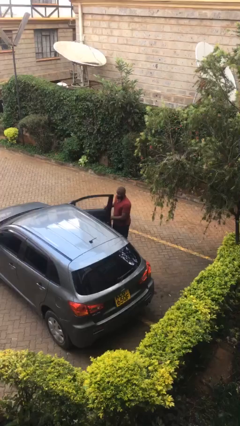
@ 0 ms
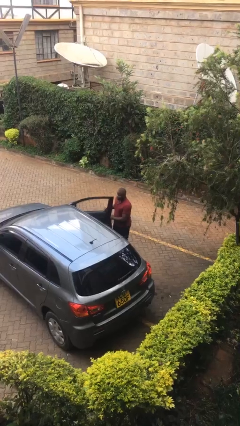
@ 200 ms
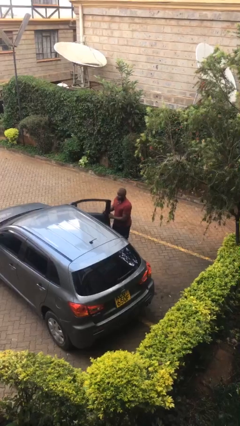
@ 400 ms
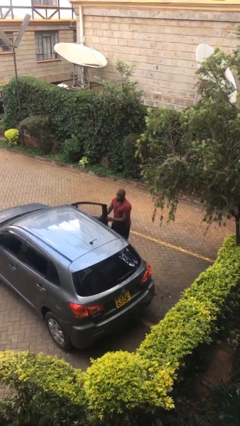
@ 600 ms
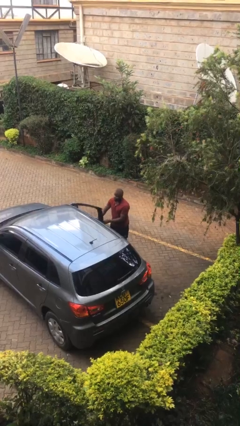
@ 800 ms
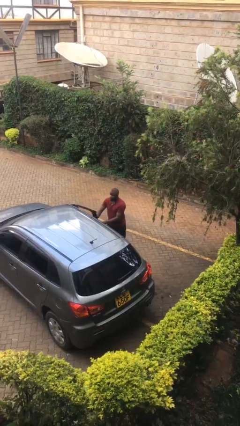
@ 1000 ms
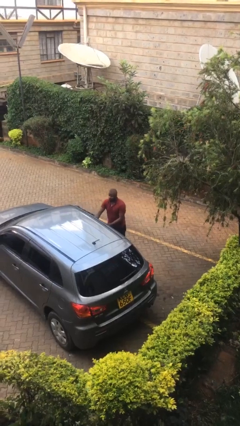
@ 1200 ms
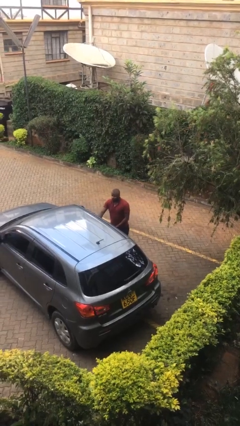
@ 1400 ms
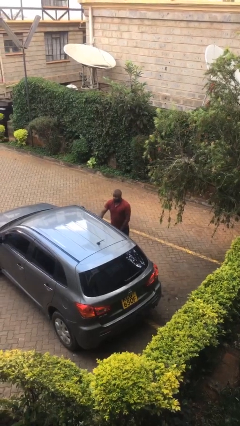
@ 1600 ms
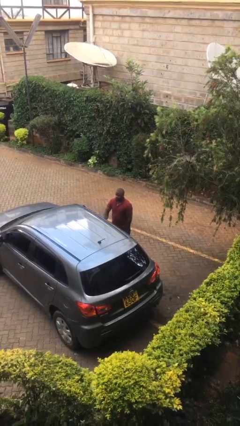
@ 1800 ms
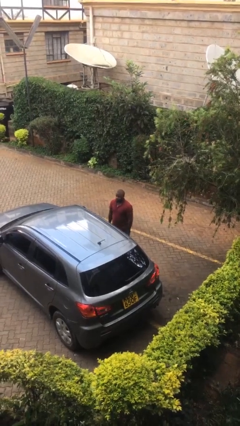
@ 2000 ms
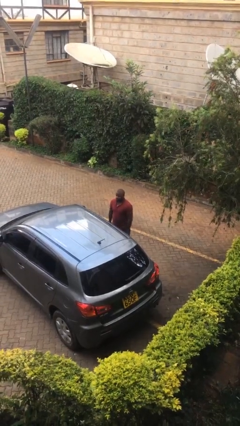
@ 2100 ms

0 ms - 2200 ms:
person closes car door

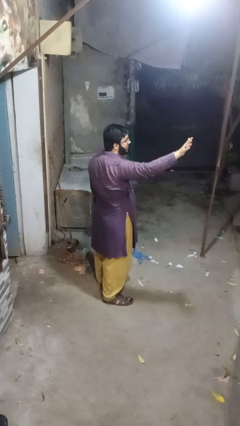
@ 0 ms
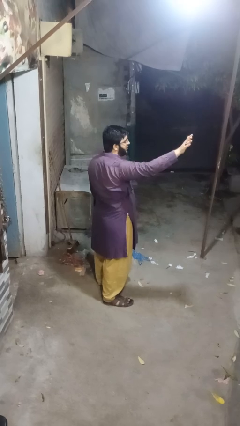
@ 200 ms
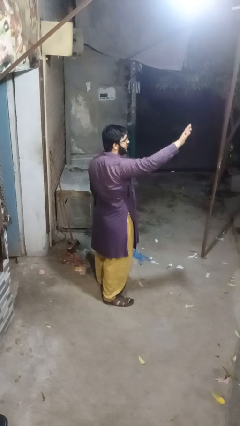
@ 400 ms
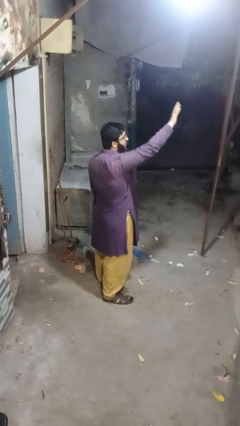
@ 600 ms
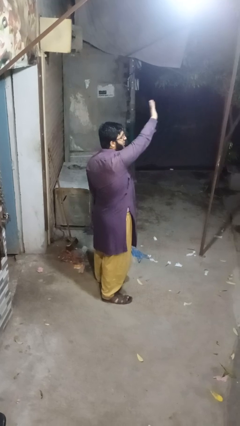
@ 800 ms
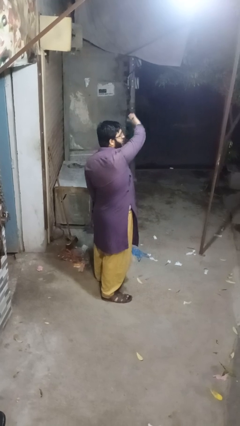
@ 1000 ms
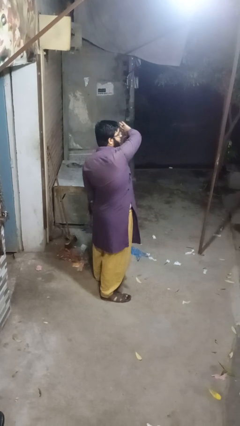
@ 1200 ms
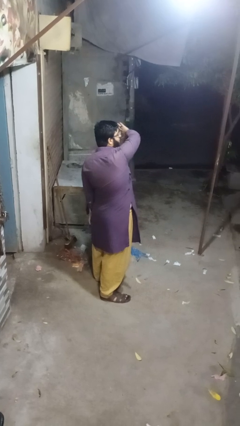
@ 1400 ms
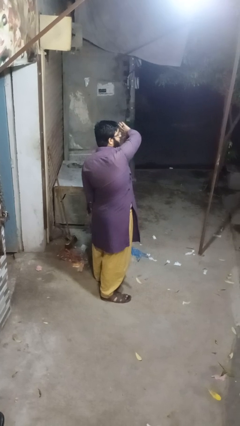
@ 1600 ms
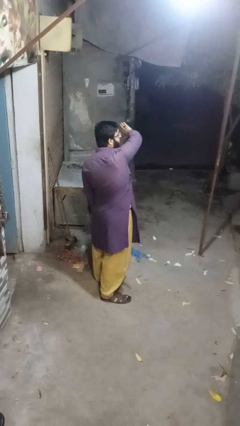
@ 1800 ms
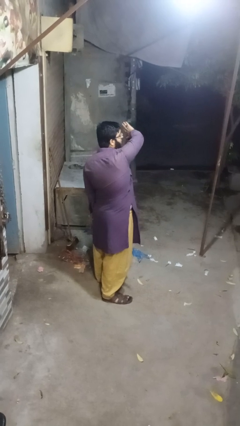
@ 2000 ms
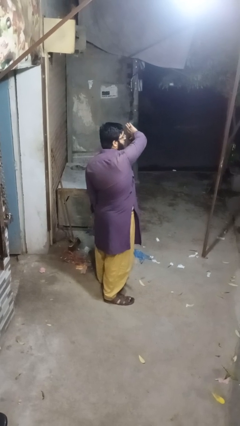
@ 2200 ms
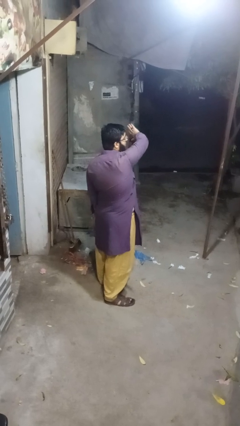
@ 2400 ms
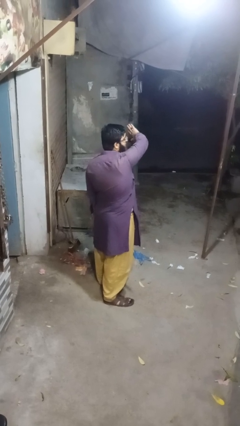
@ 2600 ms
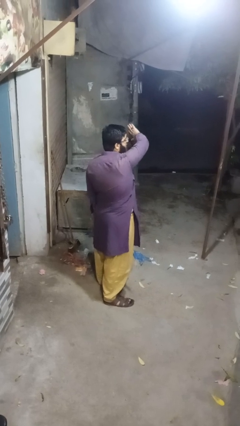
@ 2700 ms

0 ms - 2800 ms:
person gestures swipe left

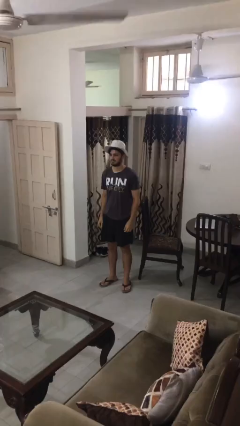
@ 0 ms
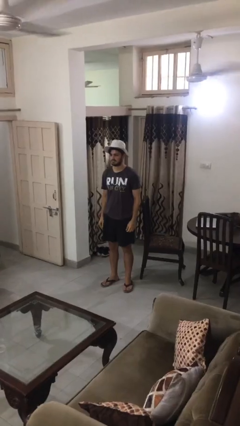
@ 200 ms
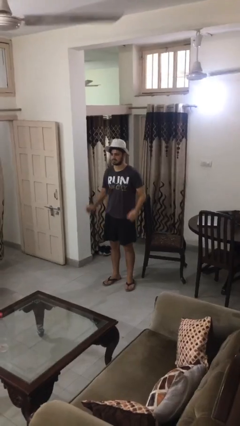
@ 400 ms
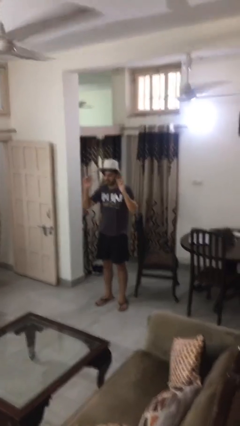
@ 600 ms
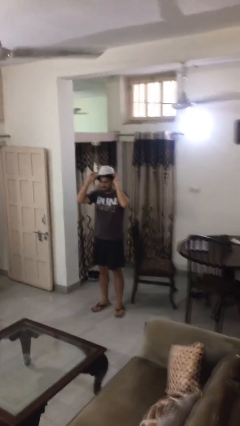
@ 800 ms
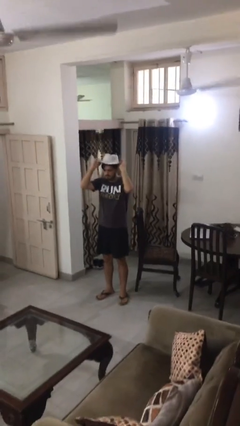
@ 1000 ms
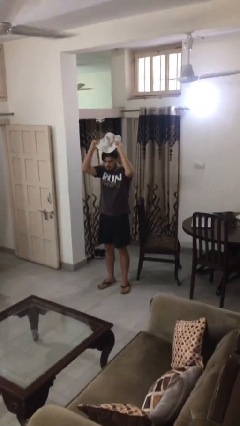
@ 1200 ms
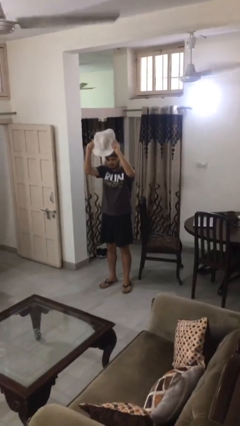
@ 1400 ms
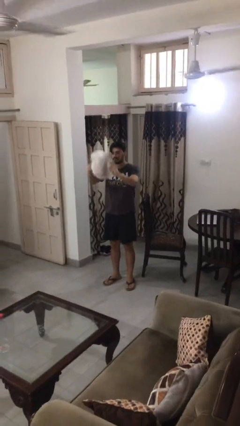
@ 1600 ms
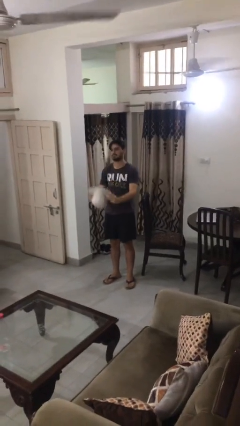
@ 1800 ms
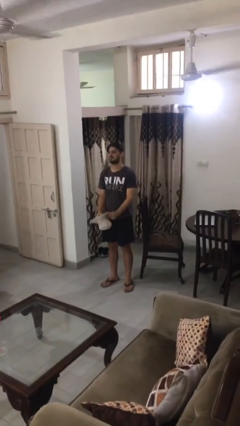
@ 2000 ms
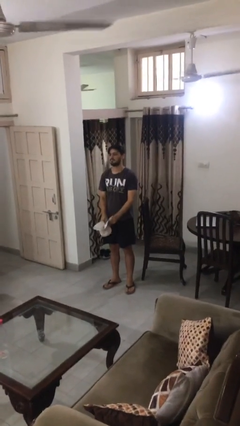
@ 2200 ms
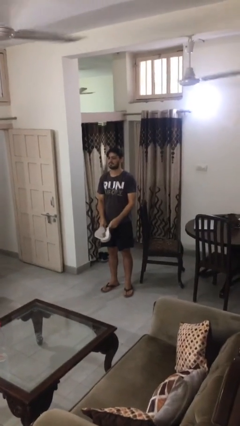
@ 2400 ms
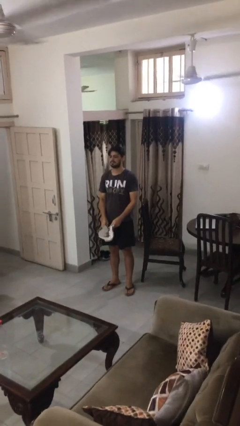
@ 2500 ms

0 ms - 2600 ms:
person takes off hat

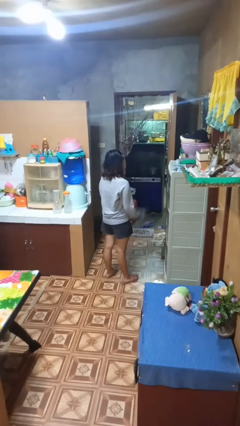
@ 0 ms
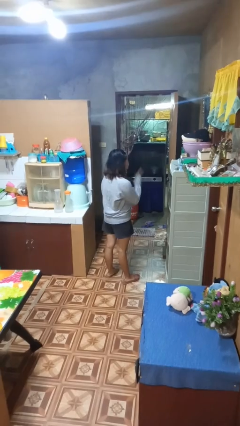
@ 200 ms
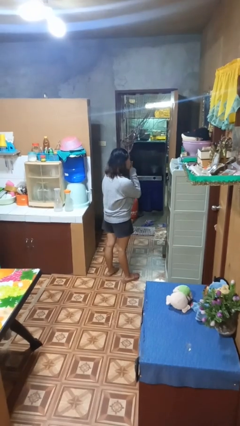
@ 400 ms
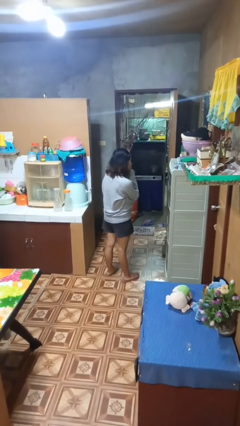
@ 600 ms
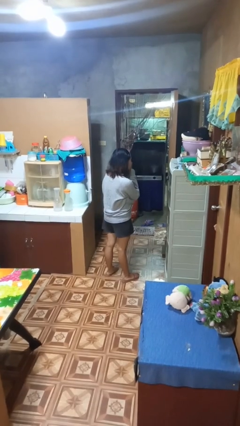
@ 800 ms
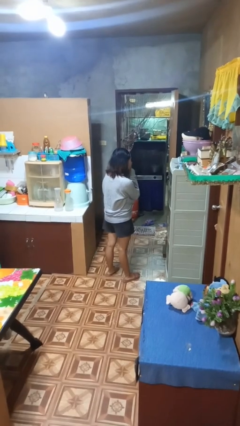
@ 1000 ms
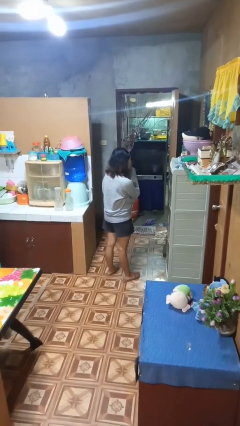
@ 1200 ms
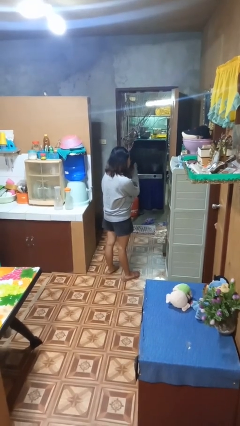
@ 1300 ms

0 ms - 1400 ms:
person gestures be quiet

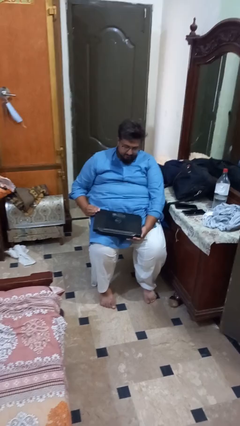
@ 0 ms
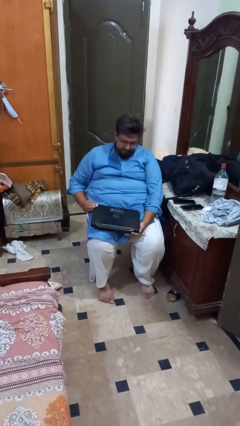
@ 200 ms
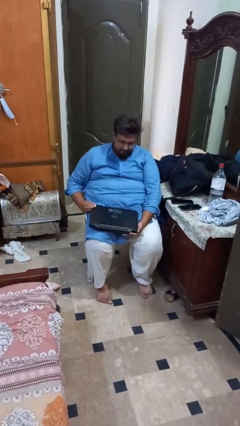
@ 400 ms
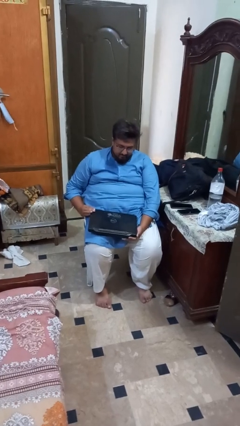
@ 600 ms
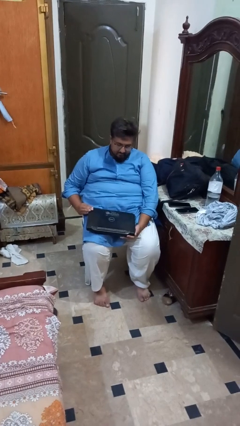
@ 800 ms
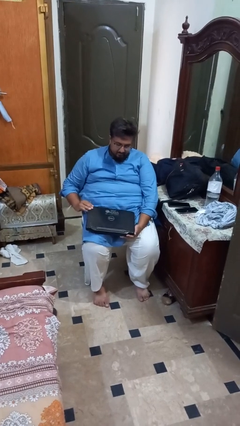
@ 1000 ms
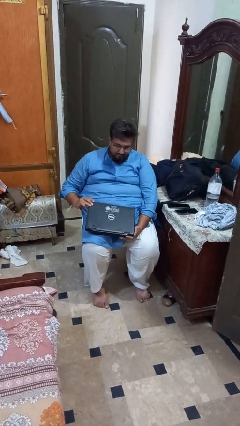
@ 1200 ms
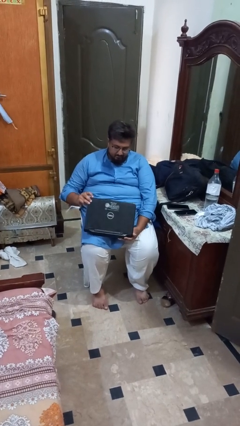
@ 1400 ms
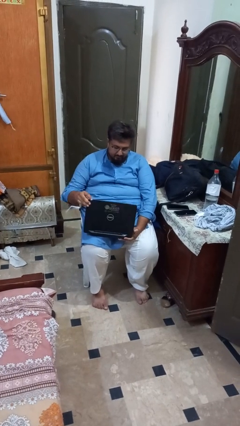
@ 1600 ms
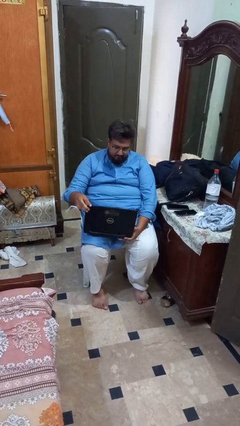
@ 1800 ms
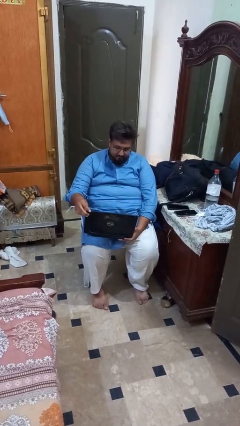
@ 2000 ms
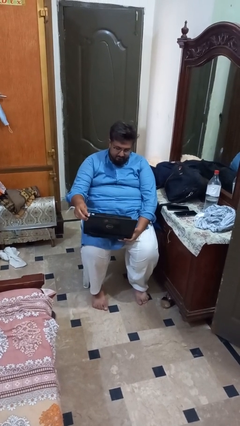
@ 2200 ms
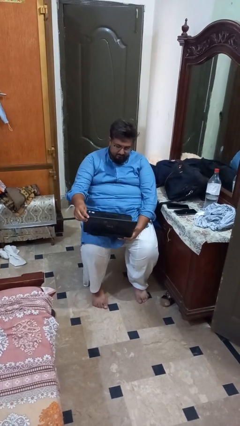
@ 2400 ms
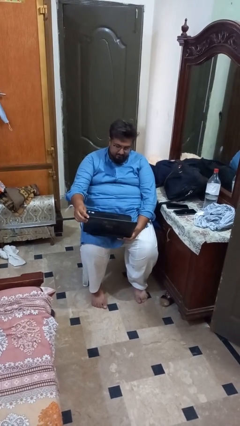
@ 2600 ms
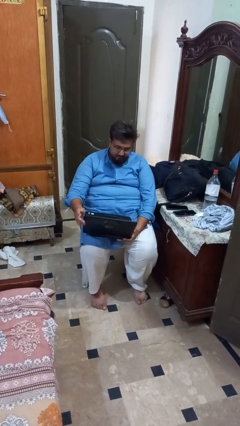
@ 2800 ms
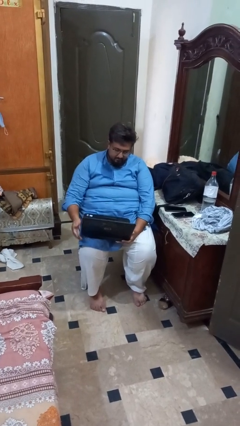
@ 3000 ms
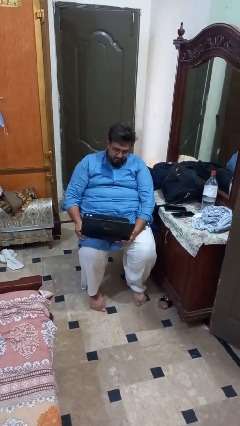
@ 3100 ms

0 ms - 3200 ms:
person opens laptop

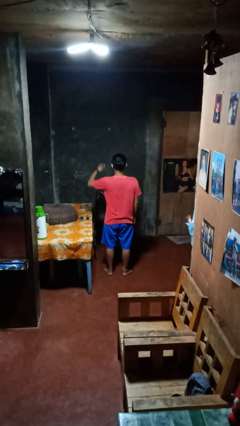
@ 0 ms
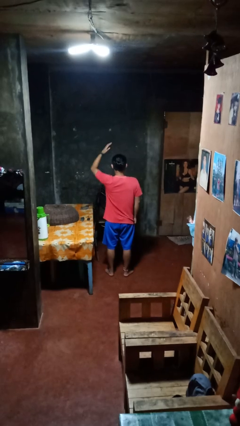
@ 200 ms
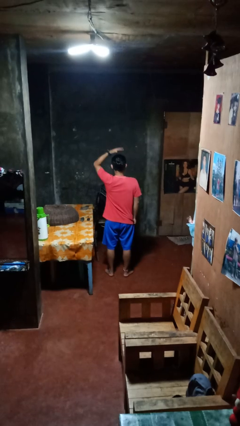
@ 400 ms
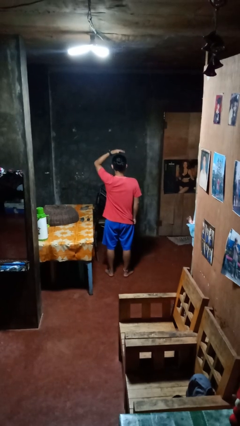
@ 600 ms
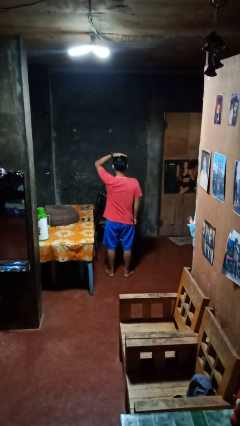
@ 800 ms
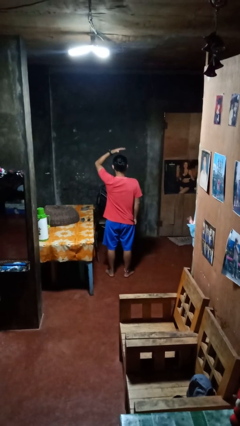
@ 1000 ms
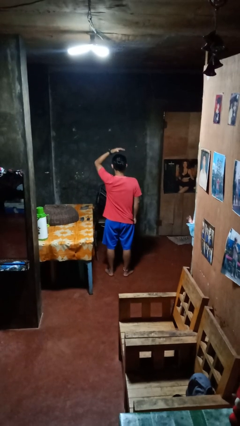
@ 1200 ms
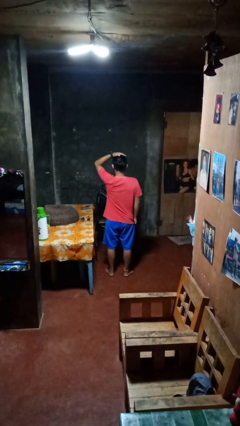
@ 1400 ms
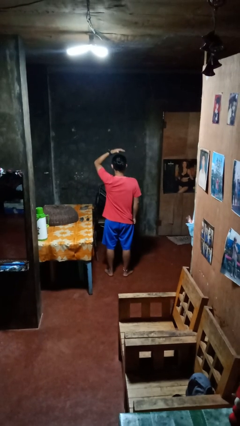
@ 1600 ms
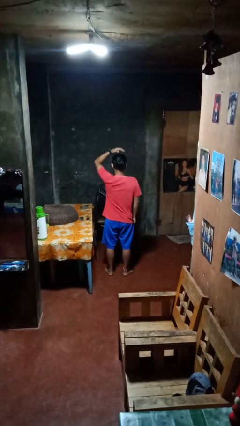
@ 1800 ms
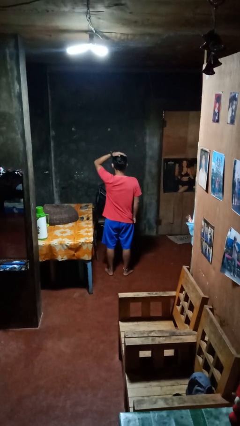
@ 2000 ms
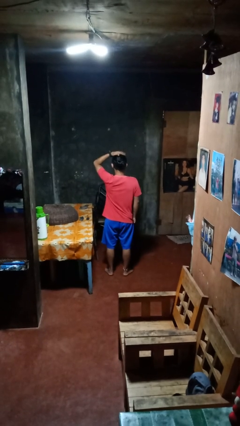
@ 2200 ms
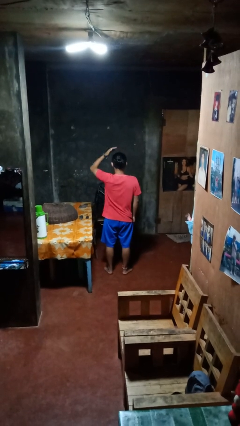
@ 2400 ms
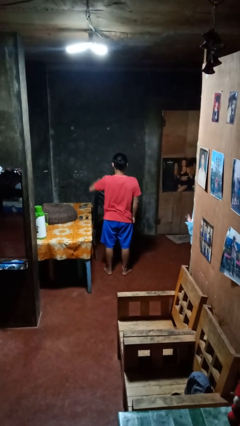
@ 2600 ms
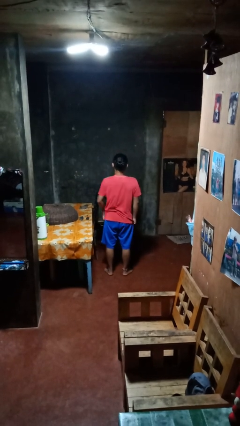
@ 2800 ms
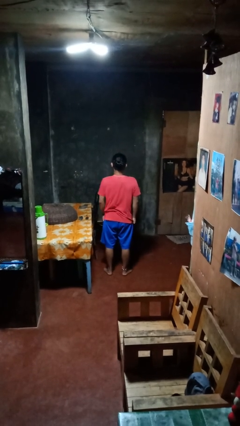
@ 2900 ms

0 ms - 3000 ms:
person pats head

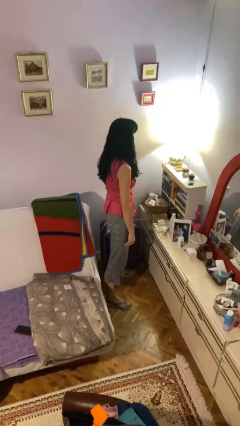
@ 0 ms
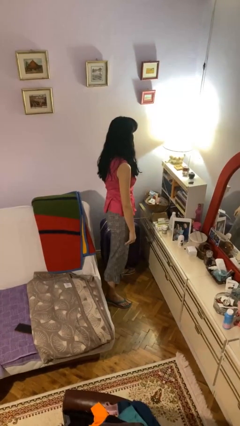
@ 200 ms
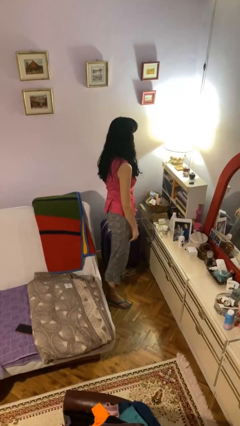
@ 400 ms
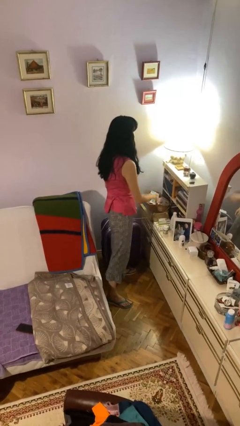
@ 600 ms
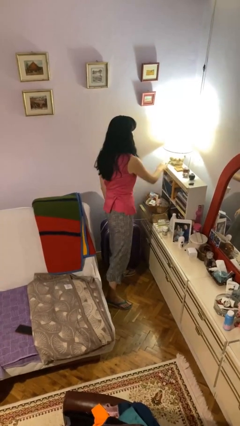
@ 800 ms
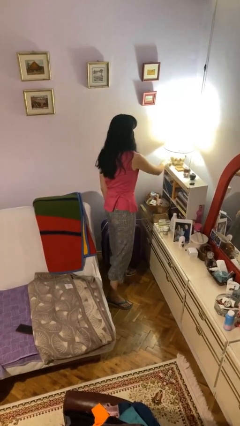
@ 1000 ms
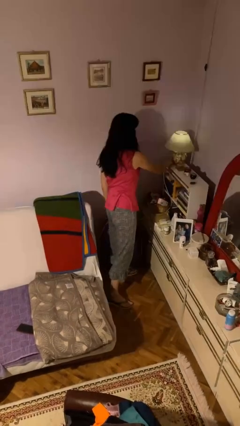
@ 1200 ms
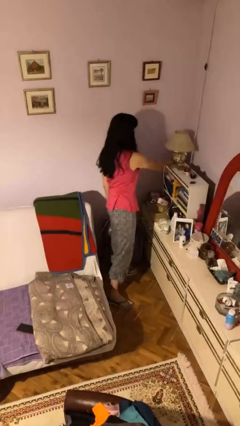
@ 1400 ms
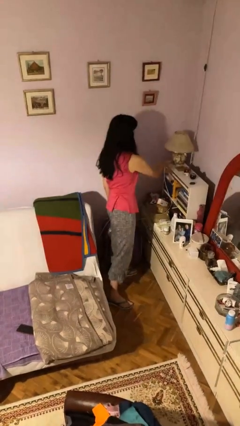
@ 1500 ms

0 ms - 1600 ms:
person turns off lamp

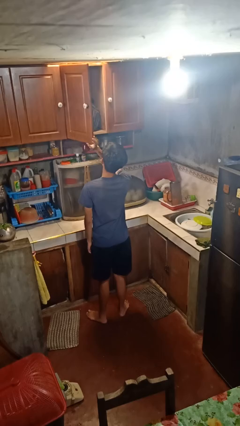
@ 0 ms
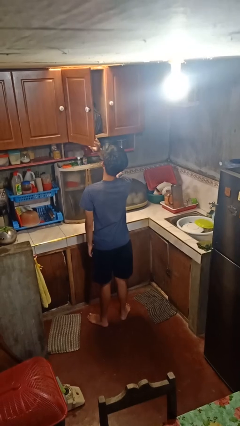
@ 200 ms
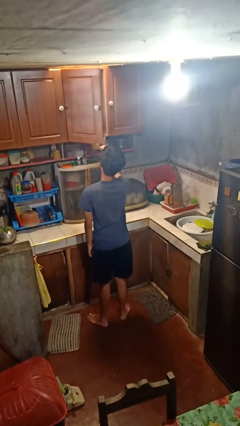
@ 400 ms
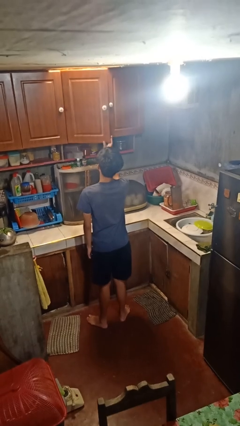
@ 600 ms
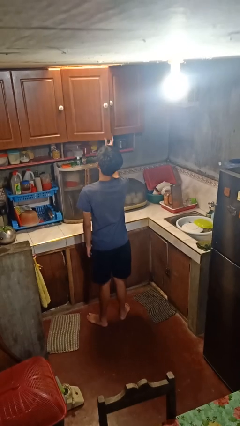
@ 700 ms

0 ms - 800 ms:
person closes cabinet
